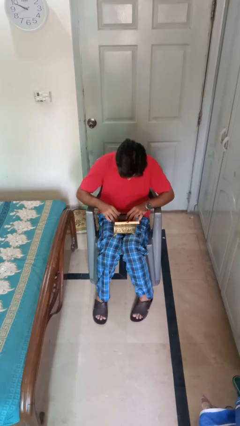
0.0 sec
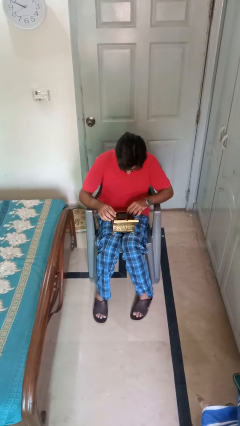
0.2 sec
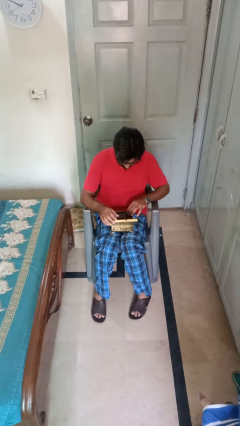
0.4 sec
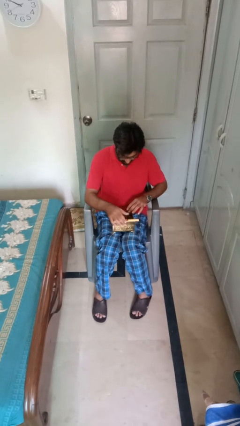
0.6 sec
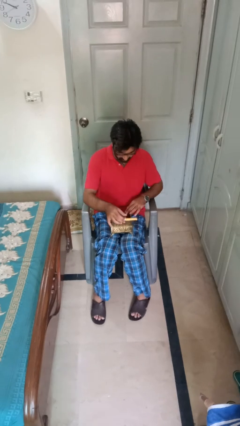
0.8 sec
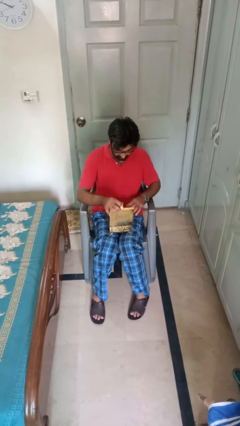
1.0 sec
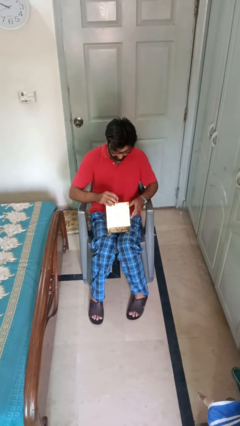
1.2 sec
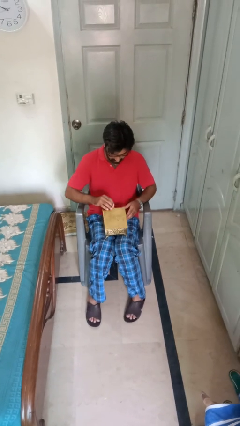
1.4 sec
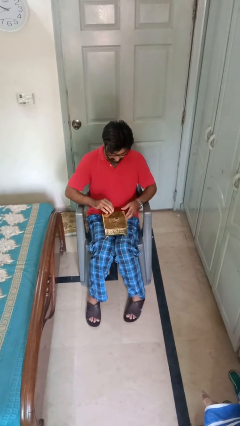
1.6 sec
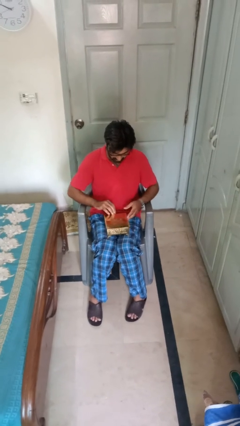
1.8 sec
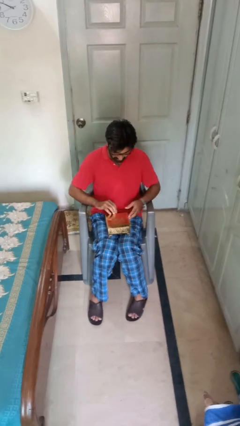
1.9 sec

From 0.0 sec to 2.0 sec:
person closes jewelry box

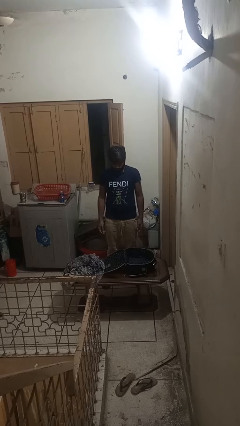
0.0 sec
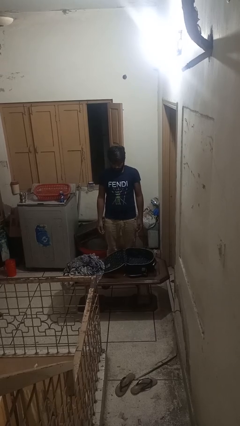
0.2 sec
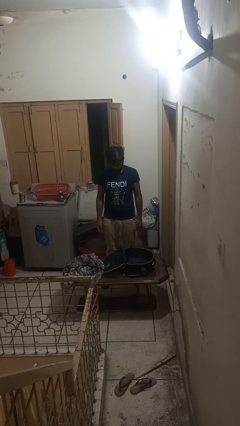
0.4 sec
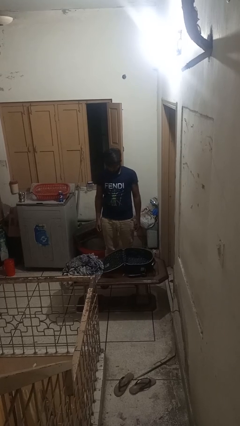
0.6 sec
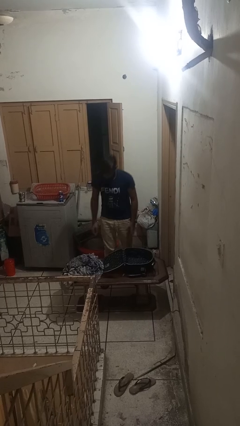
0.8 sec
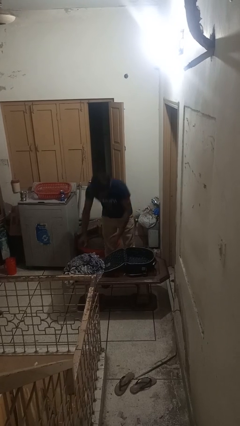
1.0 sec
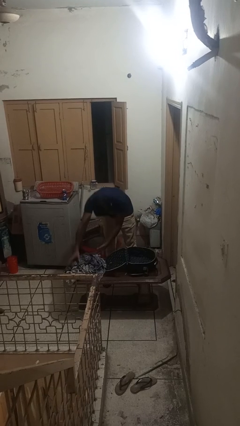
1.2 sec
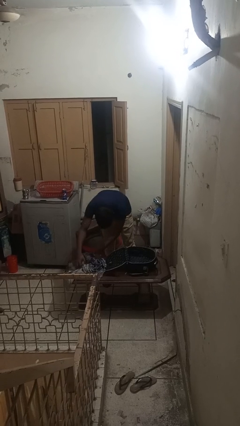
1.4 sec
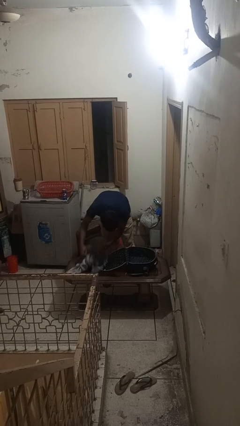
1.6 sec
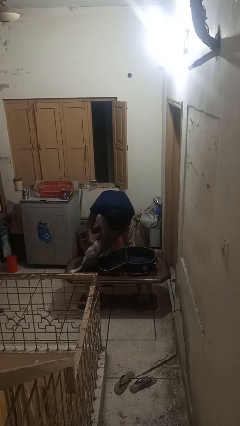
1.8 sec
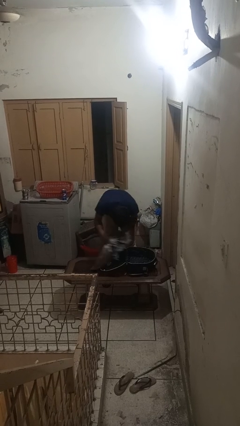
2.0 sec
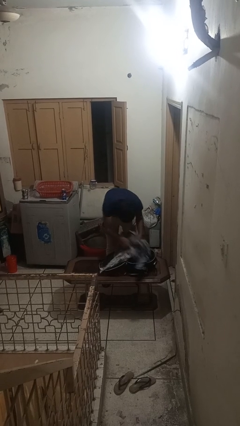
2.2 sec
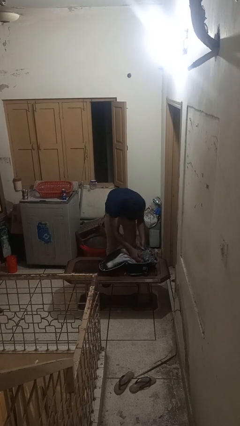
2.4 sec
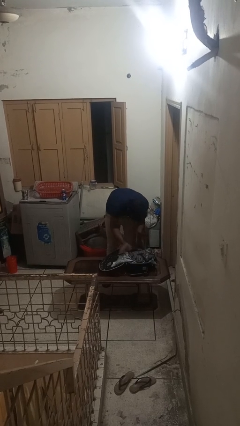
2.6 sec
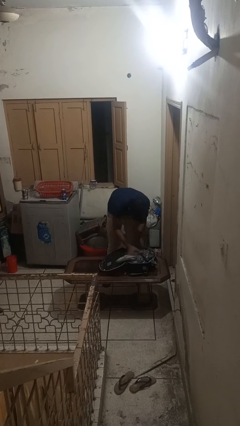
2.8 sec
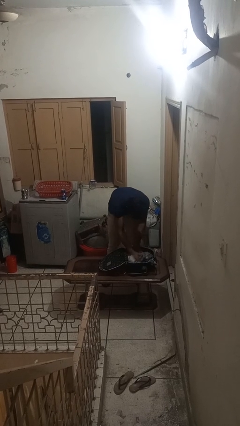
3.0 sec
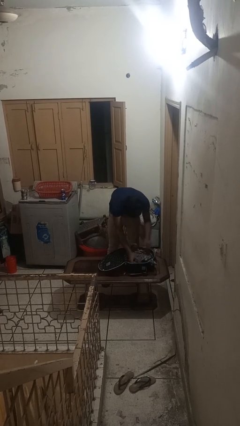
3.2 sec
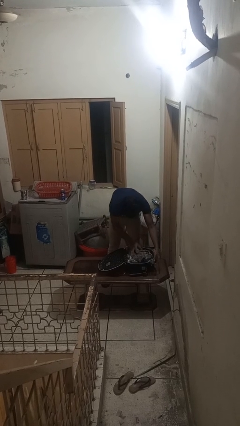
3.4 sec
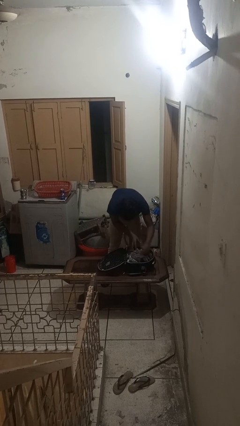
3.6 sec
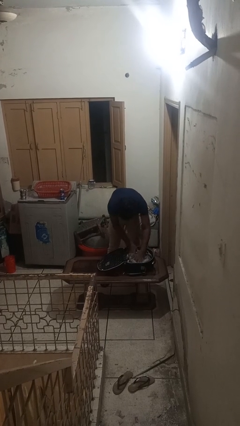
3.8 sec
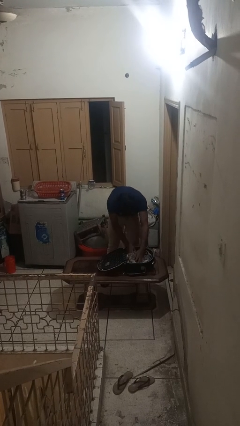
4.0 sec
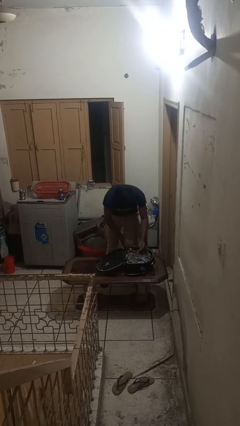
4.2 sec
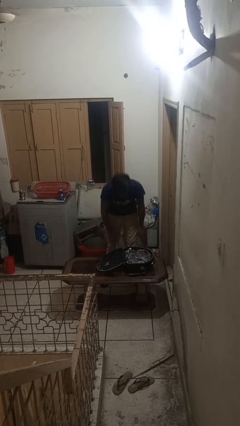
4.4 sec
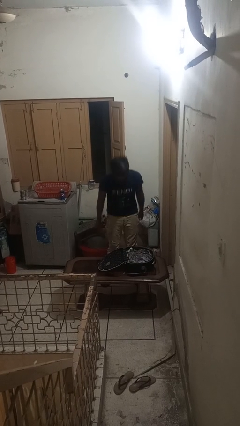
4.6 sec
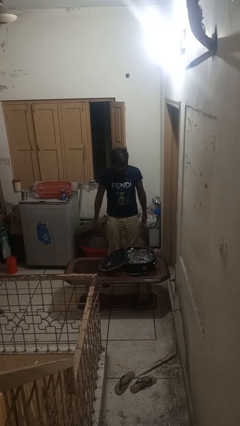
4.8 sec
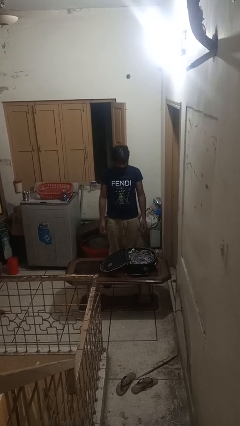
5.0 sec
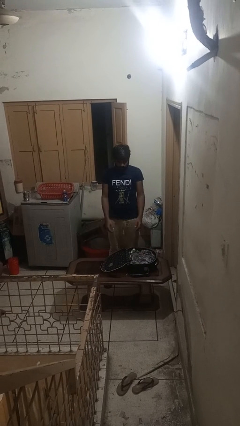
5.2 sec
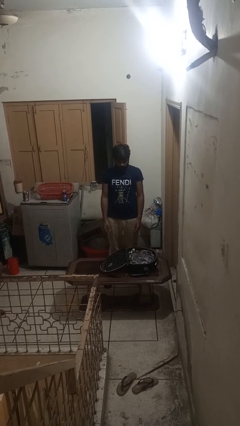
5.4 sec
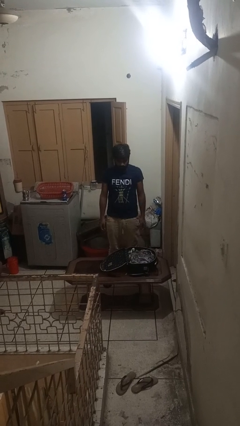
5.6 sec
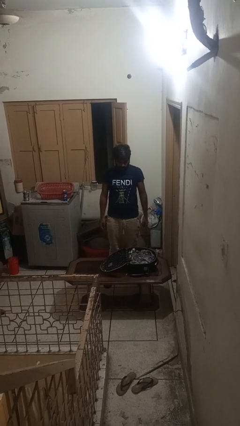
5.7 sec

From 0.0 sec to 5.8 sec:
person loads clothes into suitcase

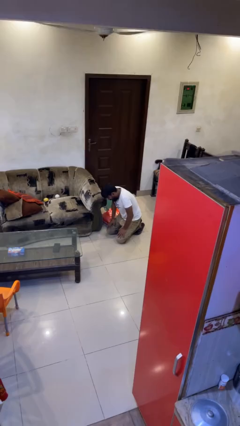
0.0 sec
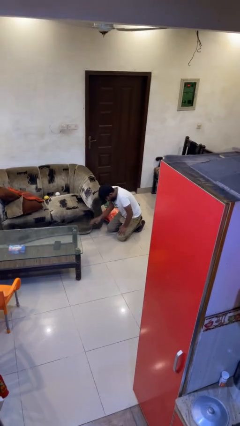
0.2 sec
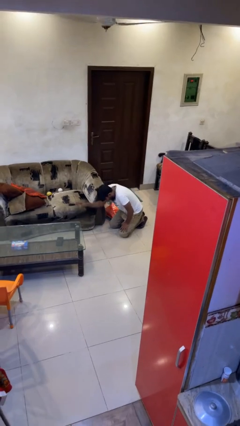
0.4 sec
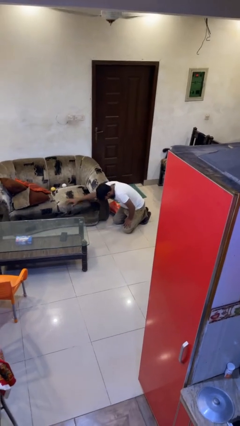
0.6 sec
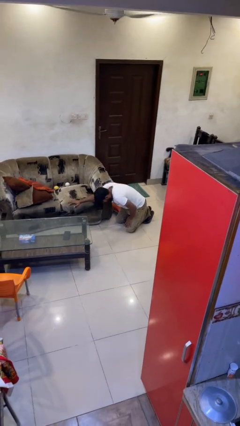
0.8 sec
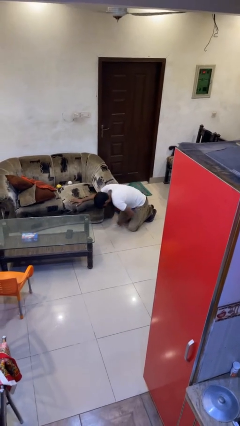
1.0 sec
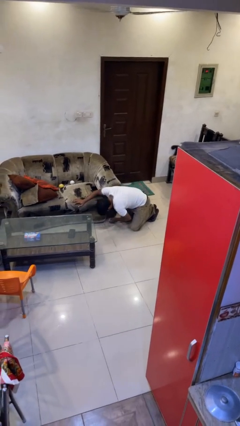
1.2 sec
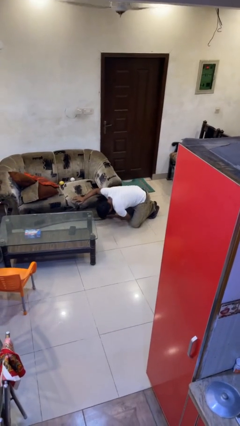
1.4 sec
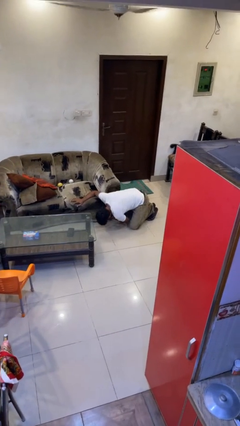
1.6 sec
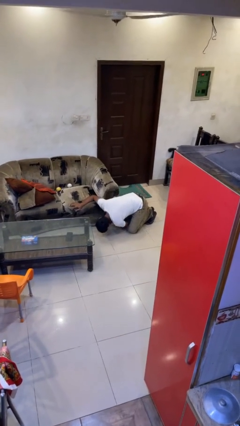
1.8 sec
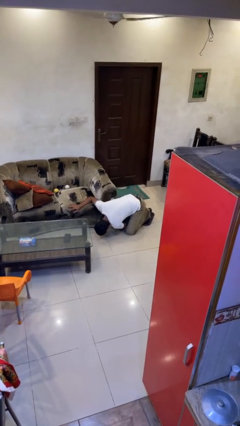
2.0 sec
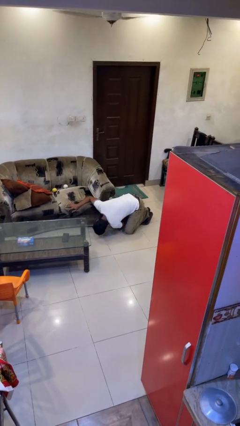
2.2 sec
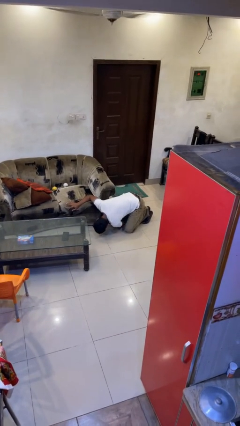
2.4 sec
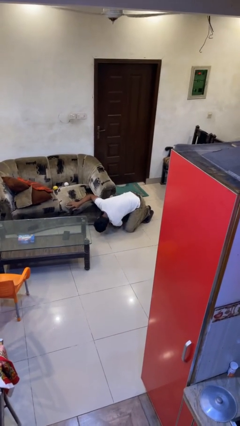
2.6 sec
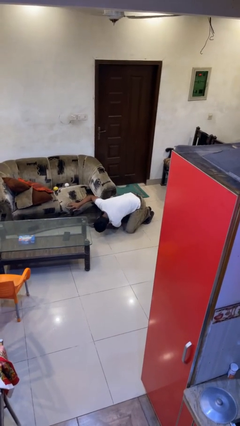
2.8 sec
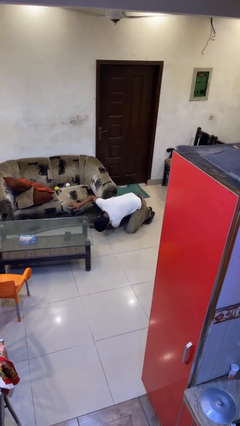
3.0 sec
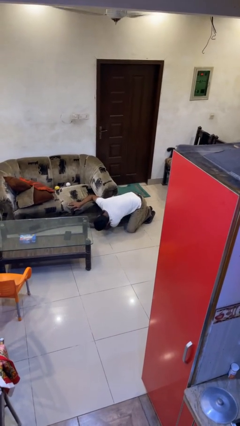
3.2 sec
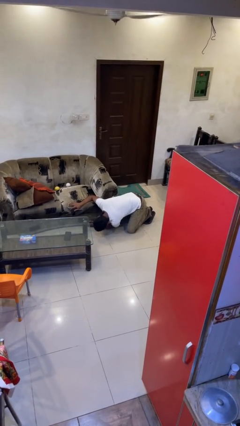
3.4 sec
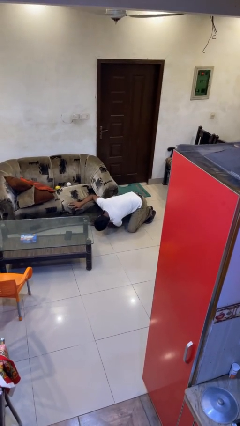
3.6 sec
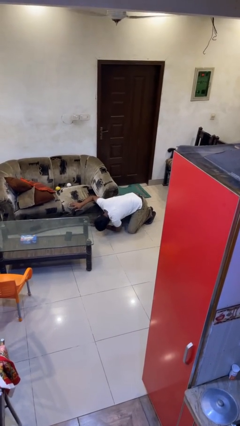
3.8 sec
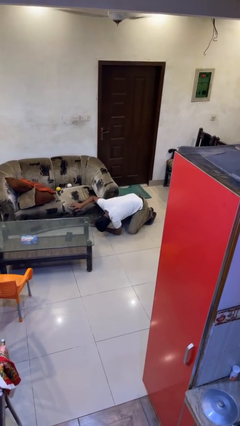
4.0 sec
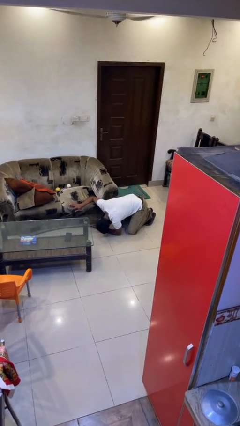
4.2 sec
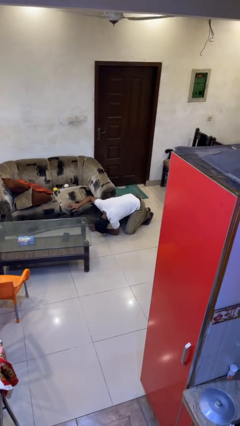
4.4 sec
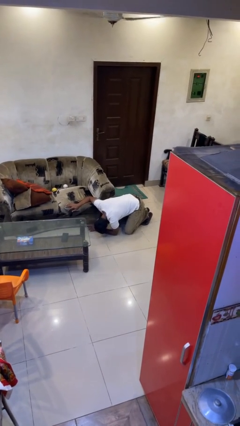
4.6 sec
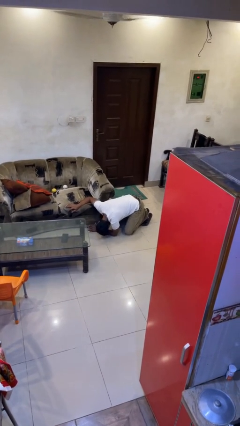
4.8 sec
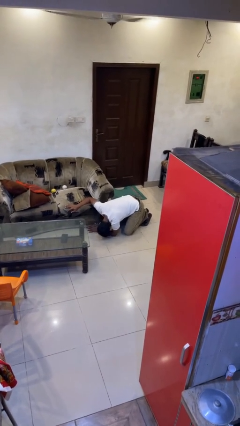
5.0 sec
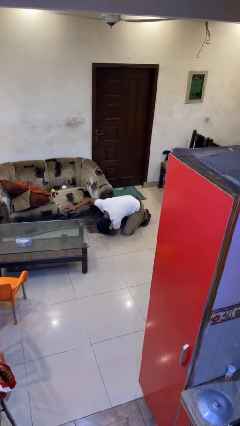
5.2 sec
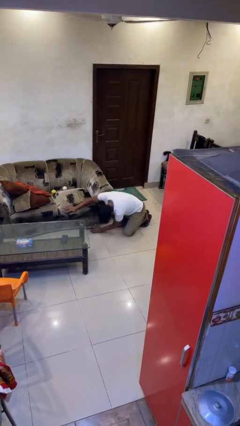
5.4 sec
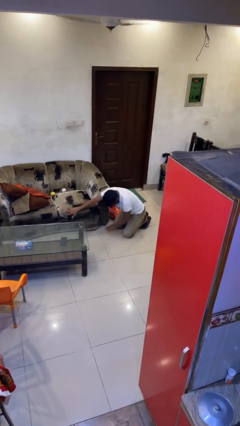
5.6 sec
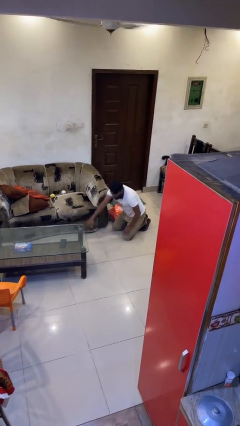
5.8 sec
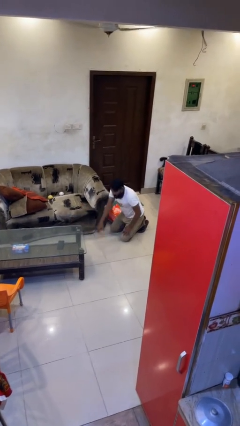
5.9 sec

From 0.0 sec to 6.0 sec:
person searches under couch

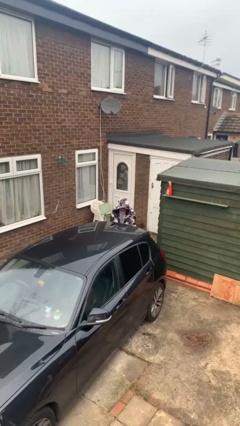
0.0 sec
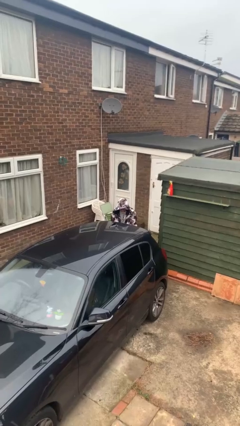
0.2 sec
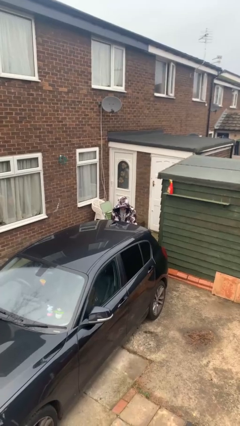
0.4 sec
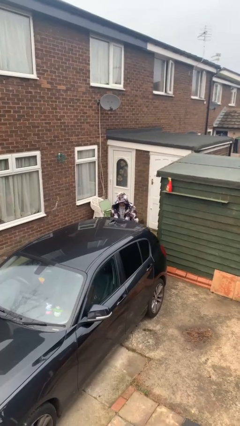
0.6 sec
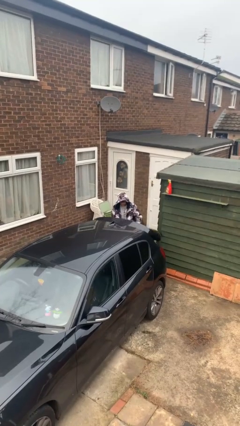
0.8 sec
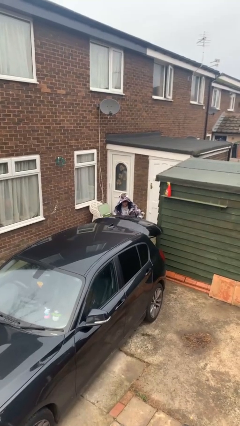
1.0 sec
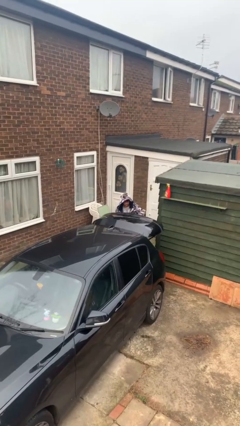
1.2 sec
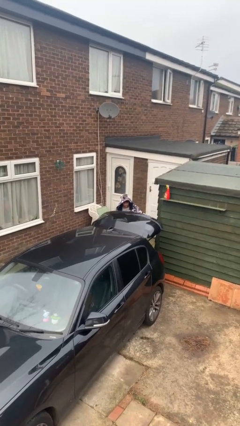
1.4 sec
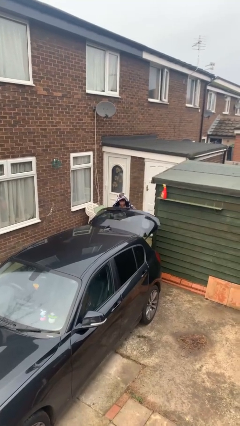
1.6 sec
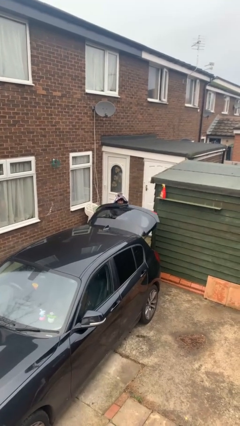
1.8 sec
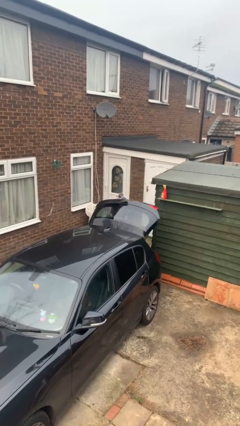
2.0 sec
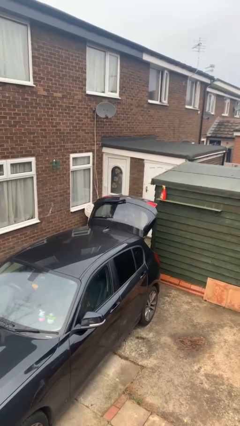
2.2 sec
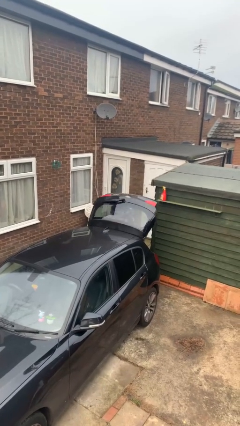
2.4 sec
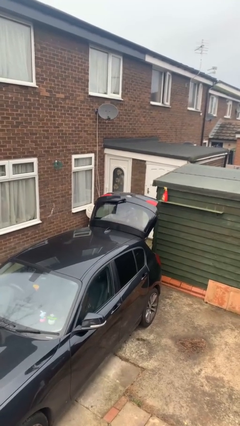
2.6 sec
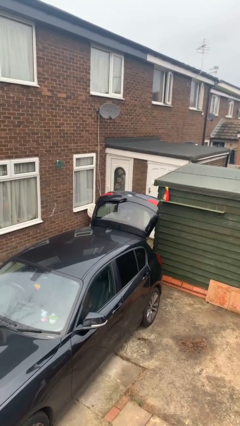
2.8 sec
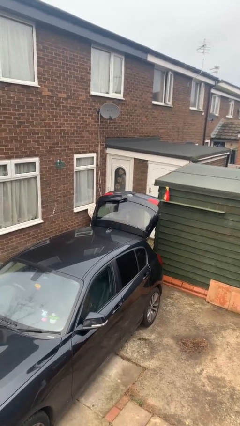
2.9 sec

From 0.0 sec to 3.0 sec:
person opens car trunk

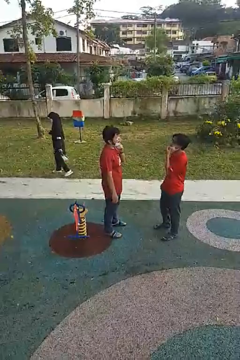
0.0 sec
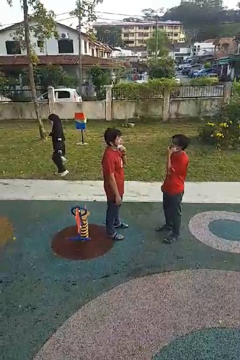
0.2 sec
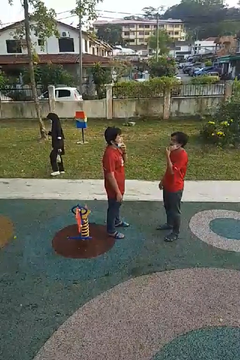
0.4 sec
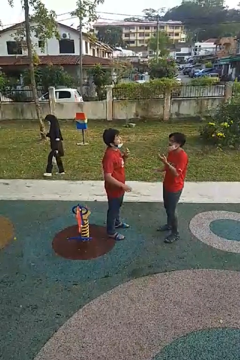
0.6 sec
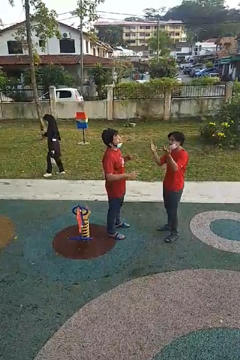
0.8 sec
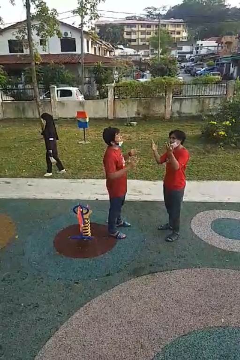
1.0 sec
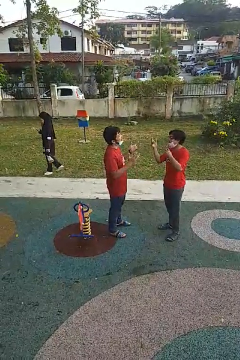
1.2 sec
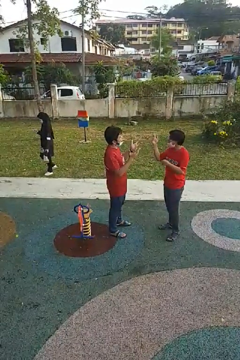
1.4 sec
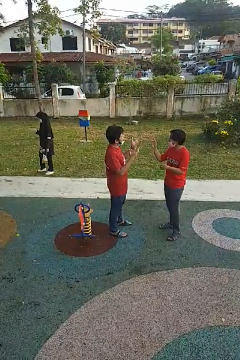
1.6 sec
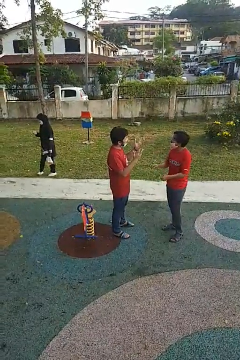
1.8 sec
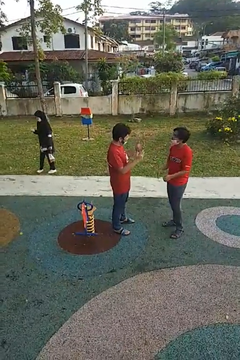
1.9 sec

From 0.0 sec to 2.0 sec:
person talks to person
